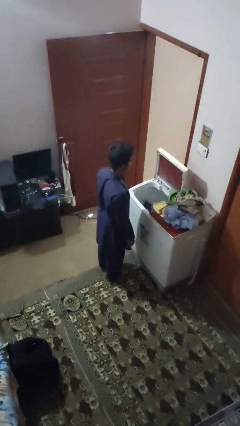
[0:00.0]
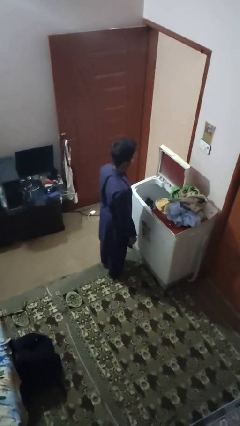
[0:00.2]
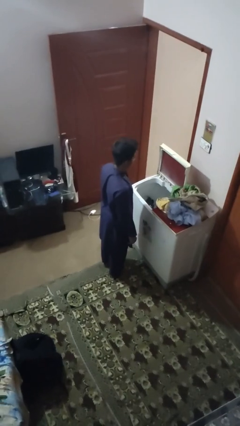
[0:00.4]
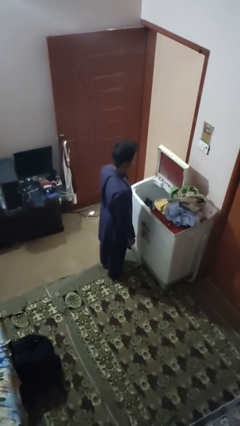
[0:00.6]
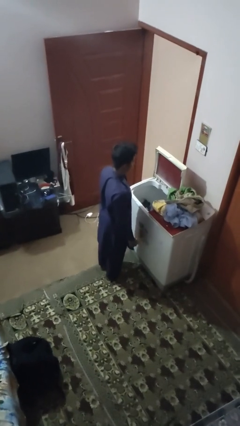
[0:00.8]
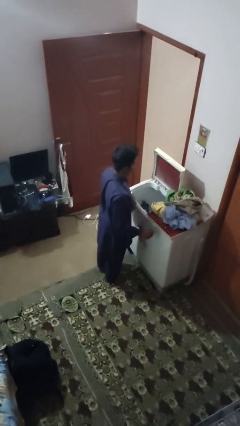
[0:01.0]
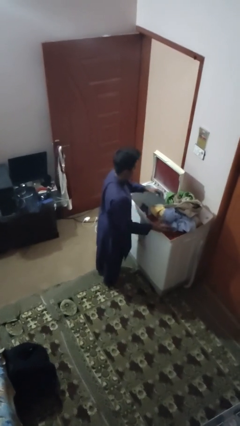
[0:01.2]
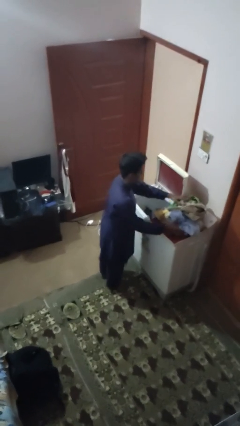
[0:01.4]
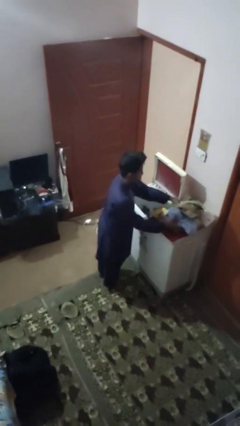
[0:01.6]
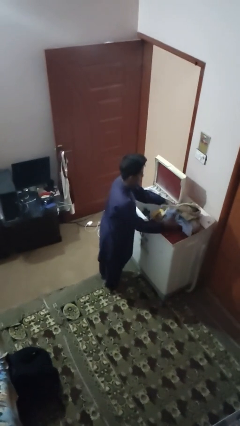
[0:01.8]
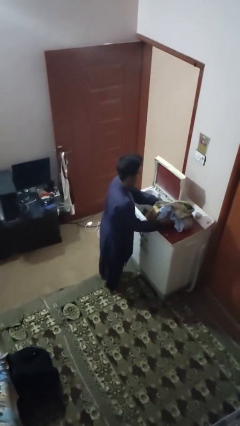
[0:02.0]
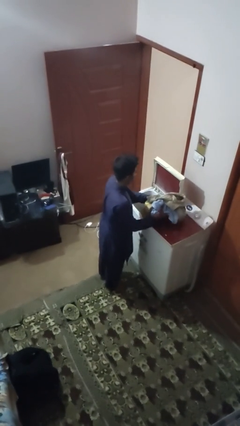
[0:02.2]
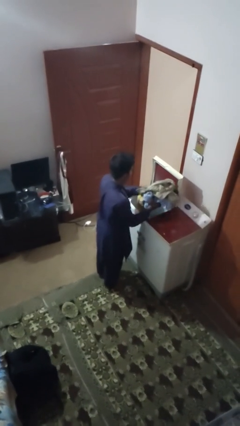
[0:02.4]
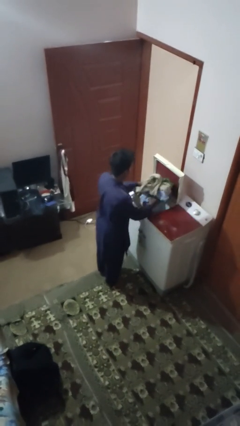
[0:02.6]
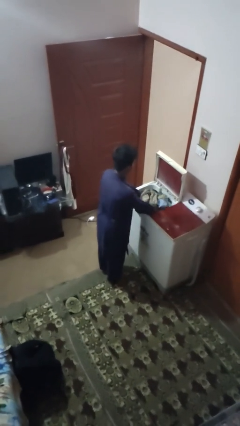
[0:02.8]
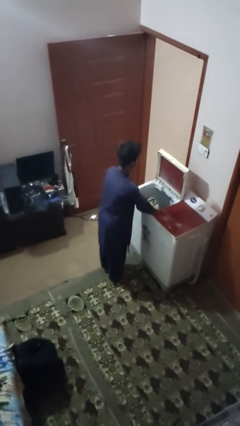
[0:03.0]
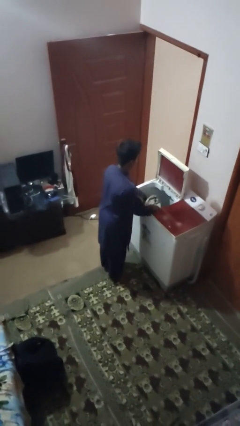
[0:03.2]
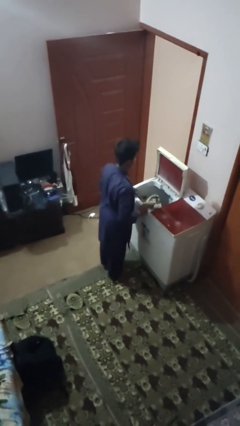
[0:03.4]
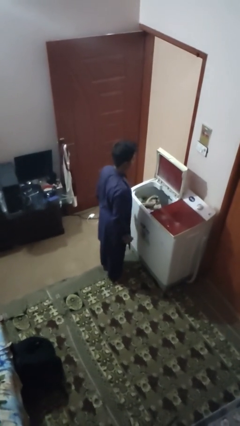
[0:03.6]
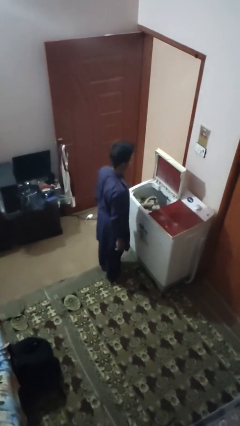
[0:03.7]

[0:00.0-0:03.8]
person loads clotheswasher

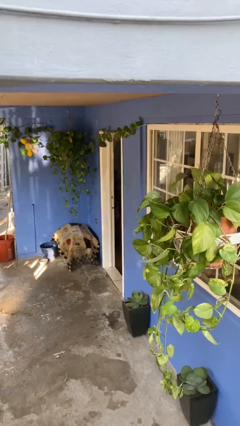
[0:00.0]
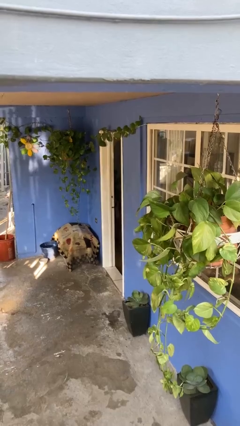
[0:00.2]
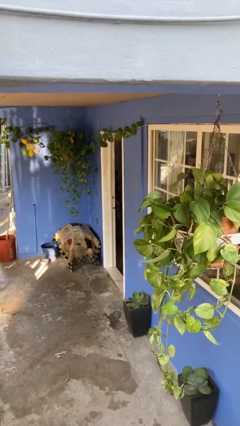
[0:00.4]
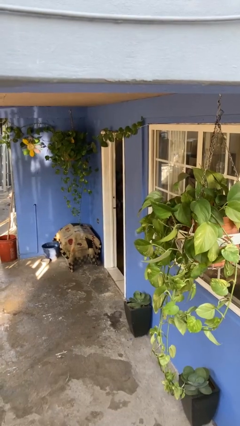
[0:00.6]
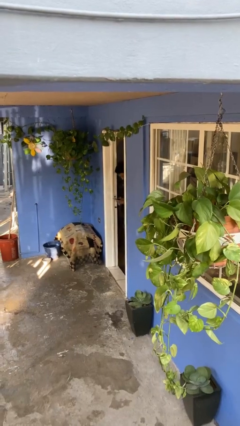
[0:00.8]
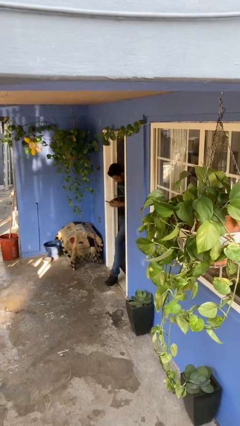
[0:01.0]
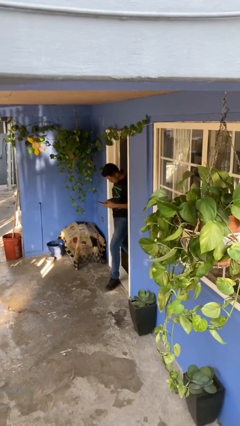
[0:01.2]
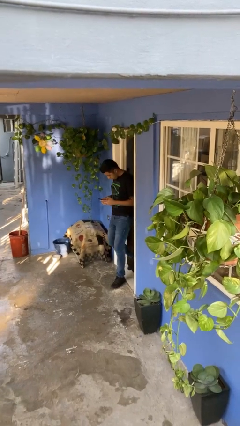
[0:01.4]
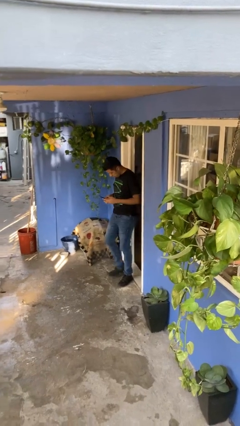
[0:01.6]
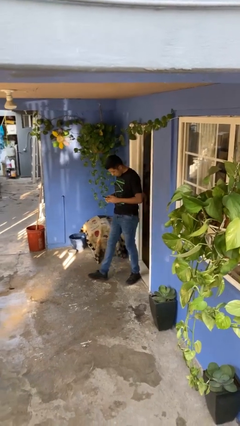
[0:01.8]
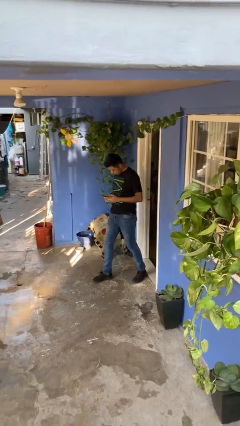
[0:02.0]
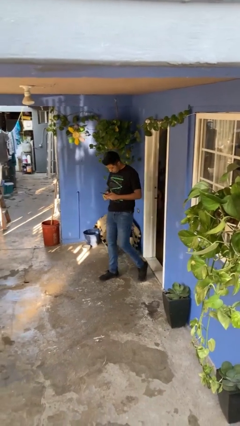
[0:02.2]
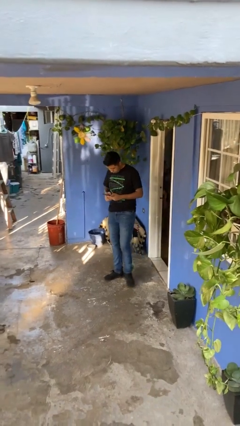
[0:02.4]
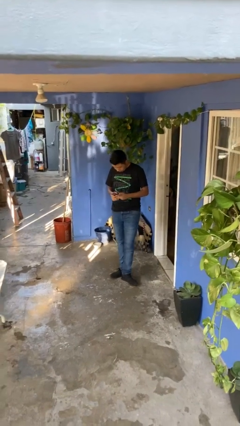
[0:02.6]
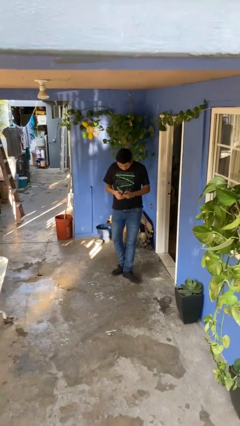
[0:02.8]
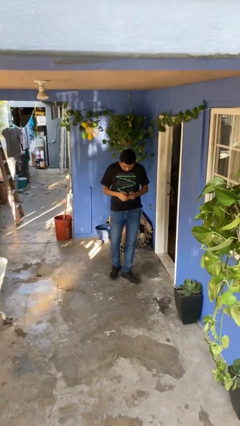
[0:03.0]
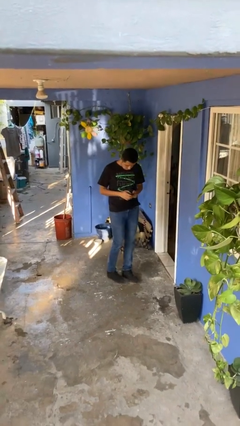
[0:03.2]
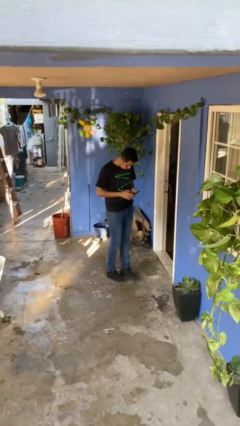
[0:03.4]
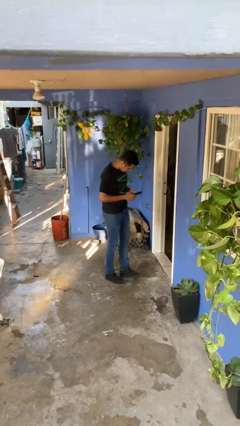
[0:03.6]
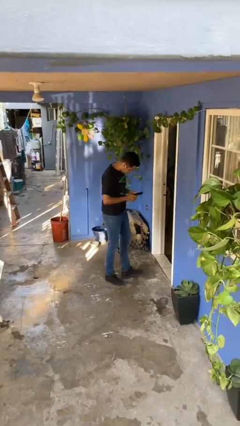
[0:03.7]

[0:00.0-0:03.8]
person enters scene through structure

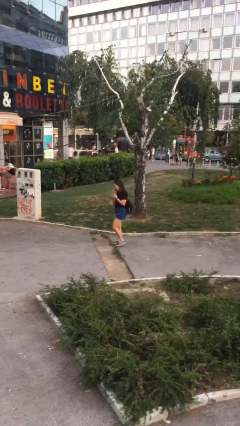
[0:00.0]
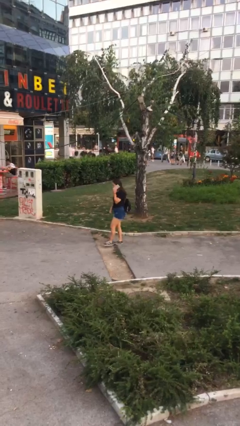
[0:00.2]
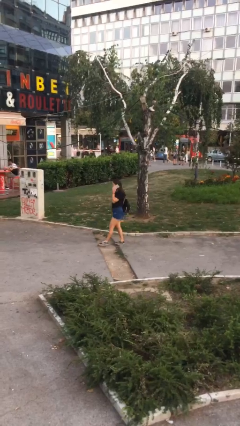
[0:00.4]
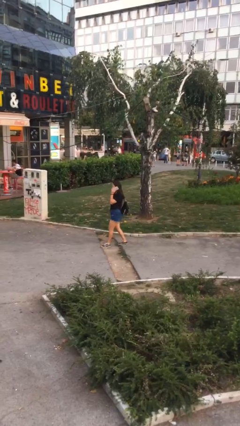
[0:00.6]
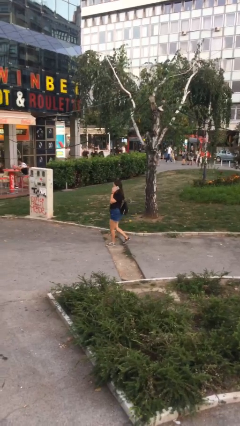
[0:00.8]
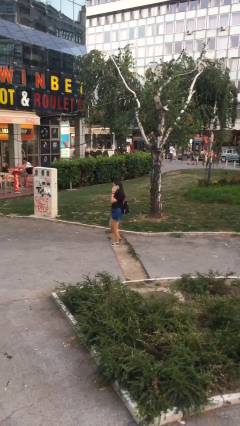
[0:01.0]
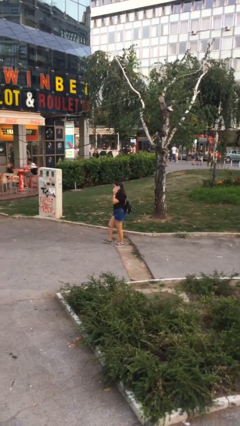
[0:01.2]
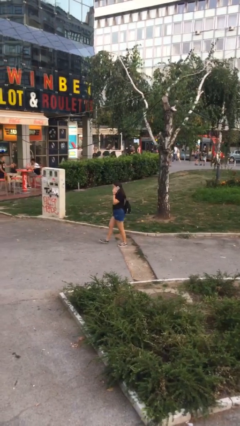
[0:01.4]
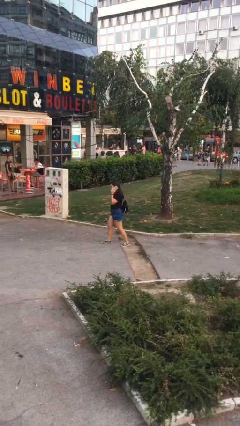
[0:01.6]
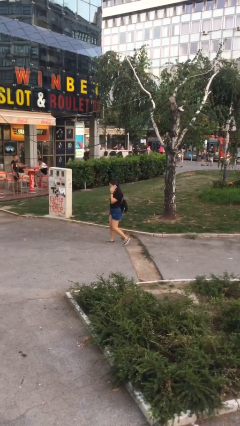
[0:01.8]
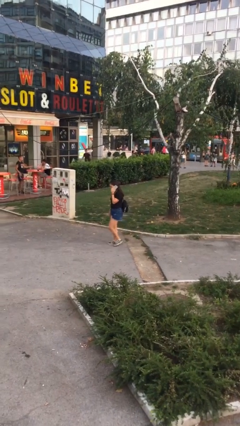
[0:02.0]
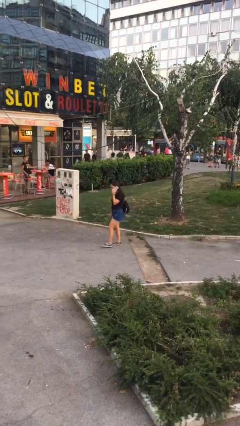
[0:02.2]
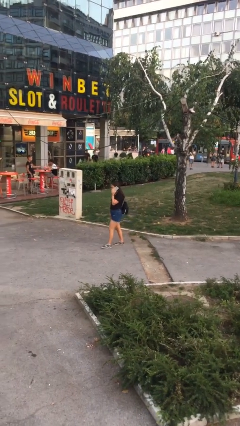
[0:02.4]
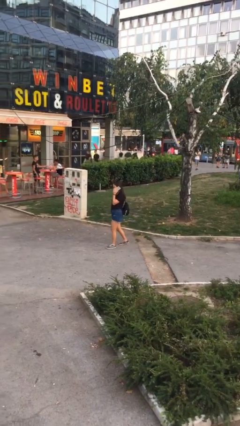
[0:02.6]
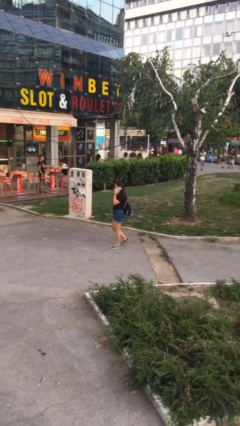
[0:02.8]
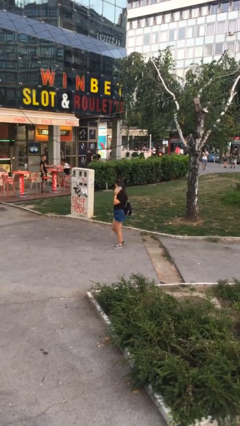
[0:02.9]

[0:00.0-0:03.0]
person talks on phone

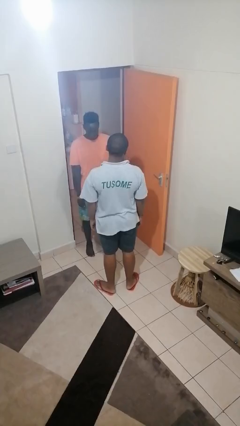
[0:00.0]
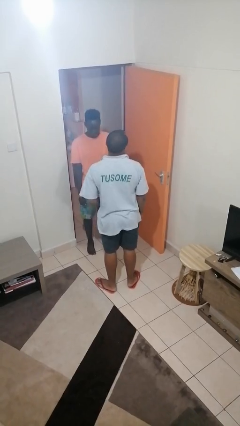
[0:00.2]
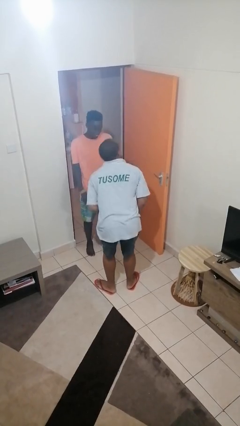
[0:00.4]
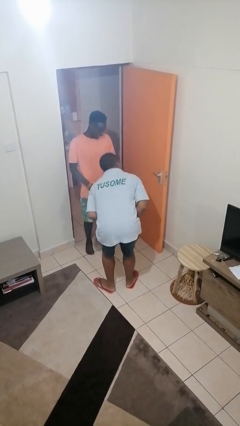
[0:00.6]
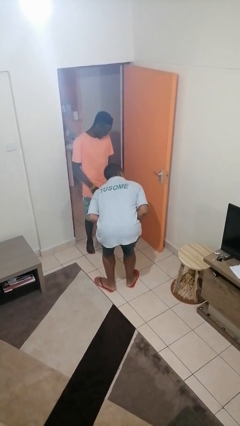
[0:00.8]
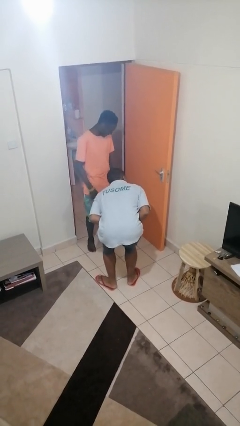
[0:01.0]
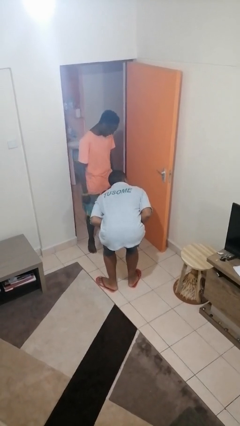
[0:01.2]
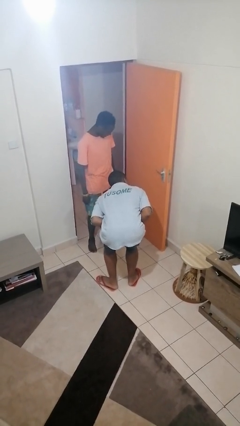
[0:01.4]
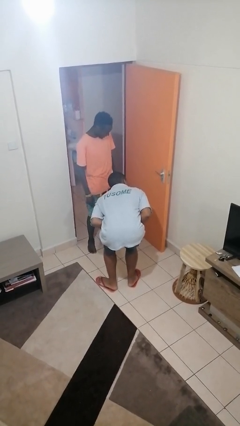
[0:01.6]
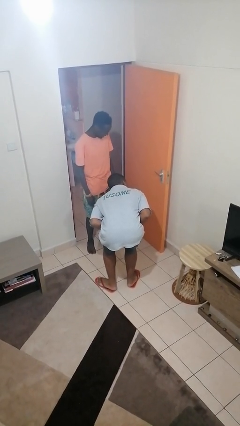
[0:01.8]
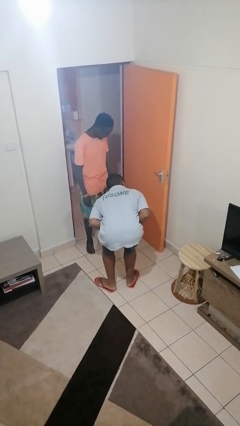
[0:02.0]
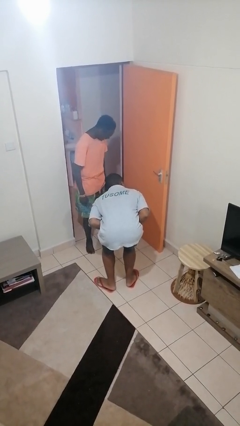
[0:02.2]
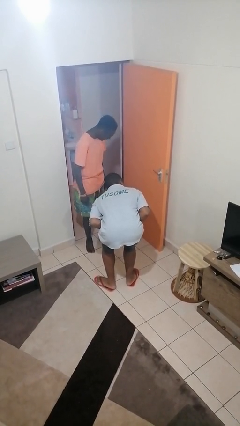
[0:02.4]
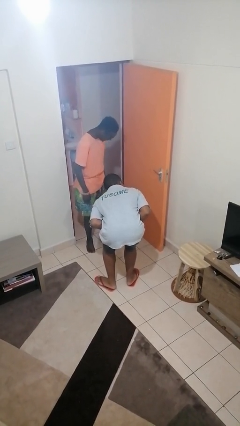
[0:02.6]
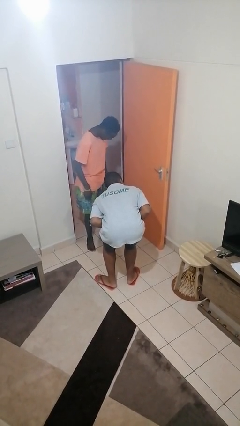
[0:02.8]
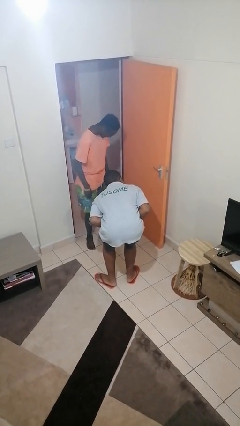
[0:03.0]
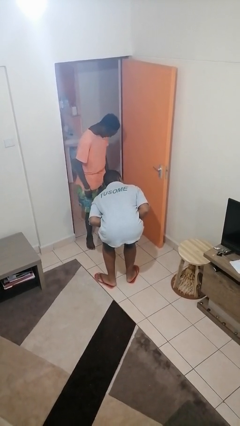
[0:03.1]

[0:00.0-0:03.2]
person laughs with person

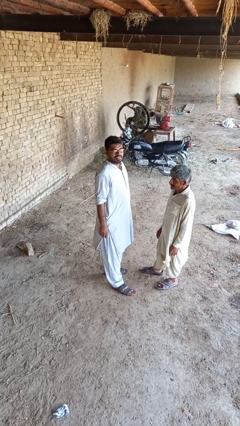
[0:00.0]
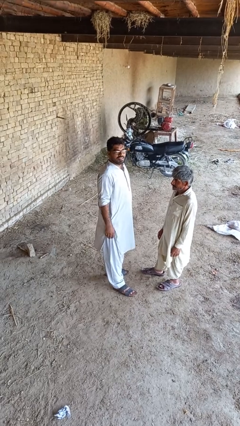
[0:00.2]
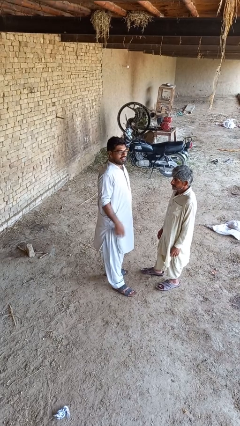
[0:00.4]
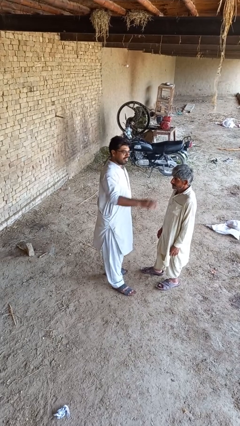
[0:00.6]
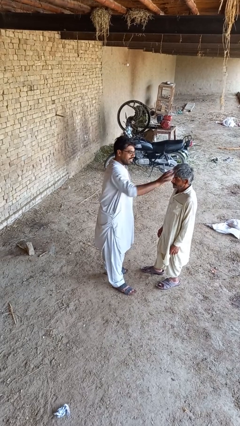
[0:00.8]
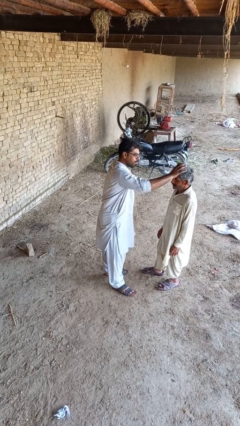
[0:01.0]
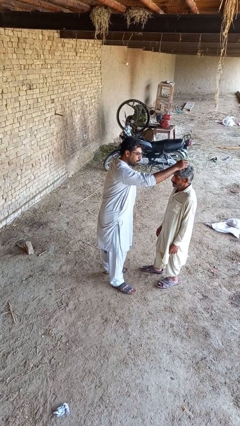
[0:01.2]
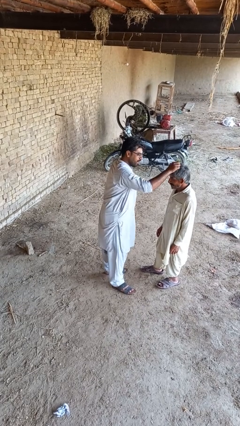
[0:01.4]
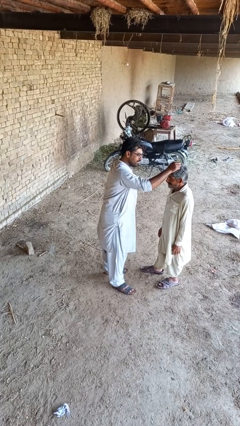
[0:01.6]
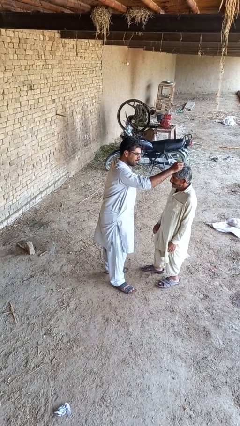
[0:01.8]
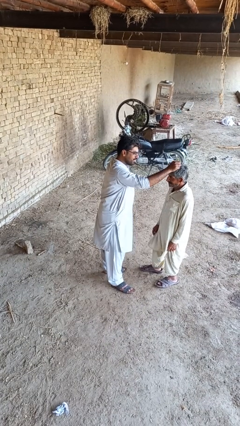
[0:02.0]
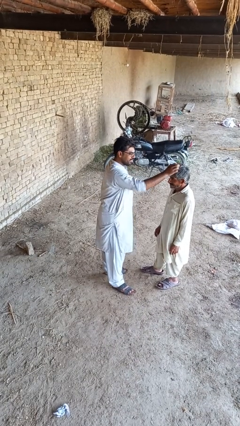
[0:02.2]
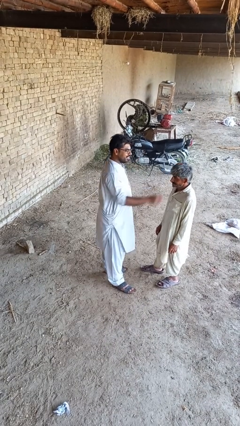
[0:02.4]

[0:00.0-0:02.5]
person grabs person by hair

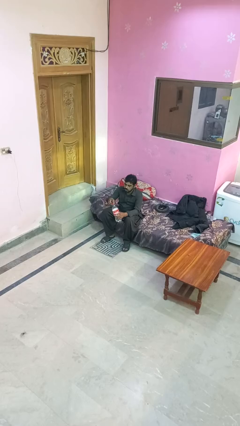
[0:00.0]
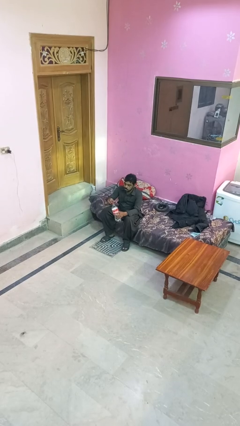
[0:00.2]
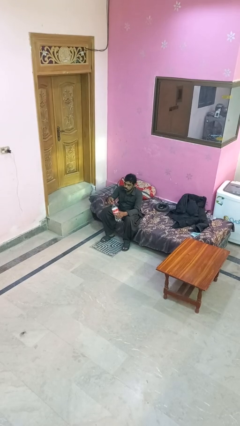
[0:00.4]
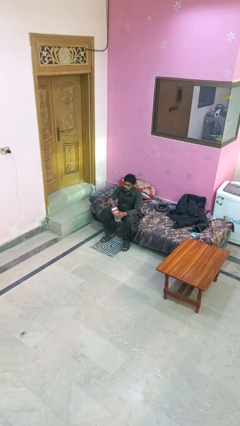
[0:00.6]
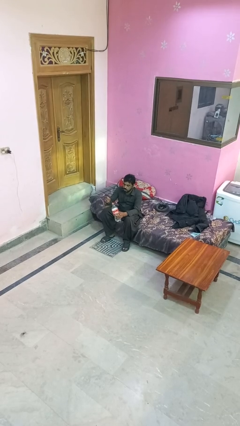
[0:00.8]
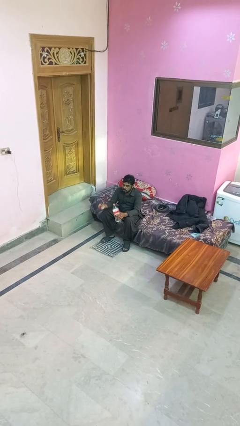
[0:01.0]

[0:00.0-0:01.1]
person unscrews lid from bottle
